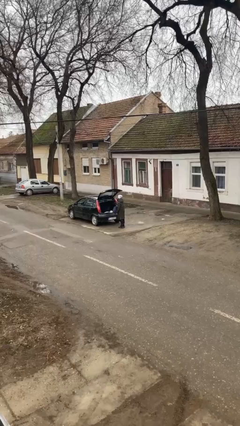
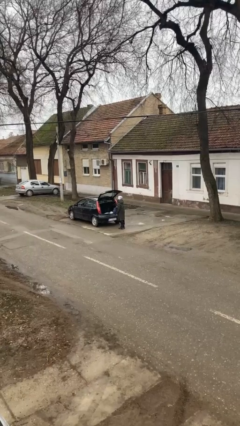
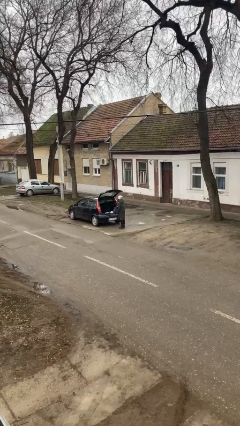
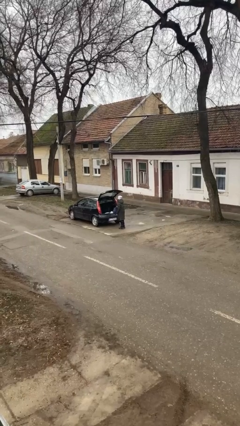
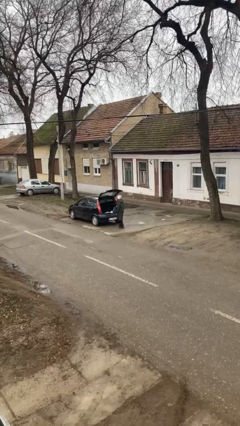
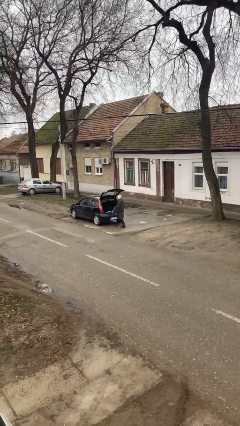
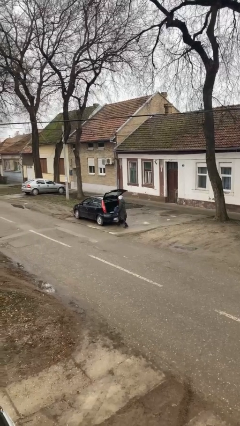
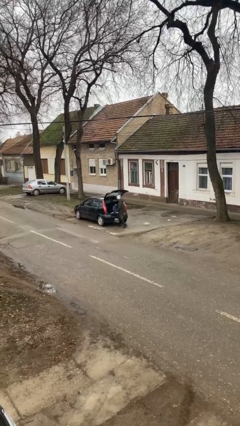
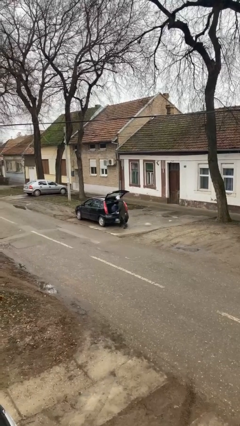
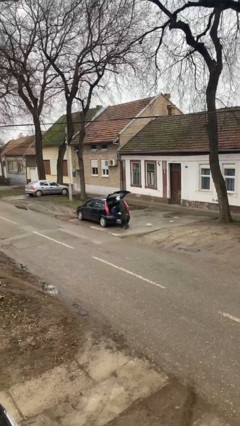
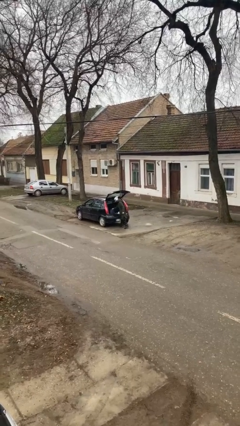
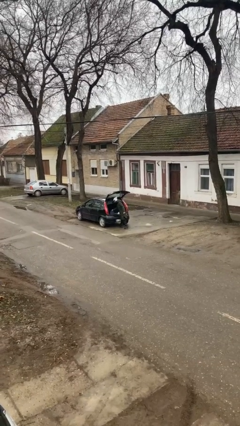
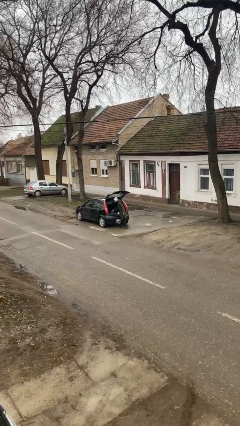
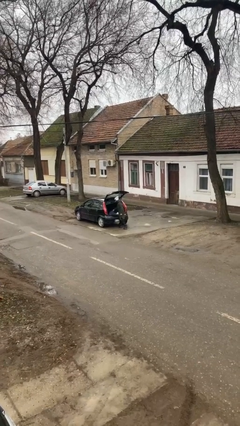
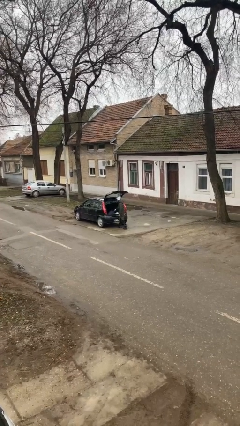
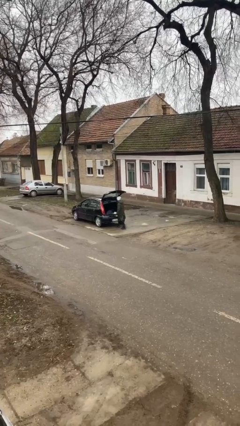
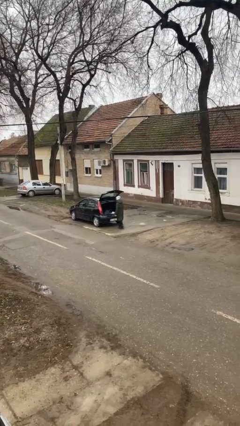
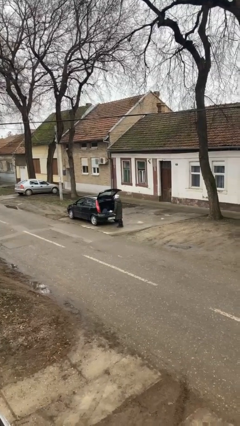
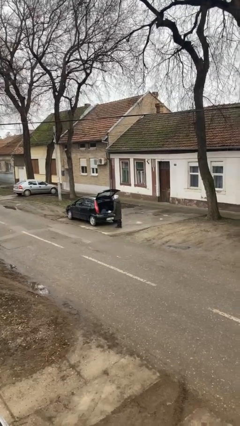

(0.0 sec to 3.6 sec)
person loads car

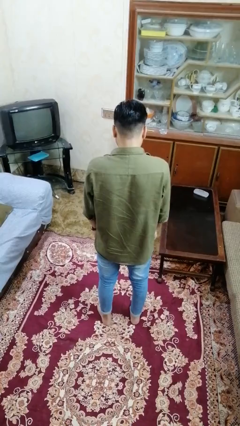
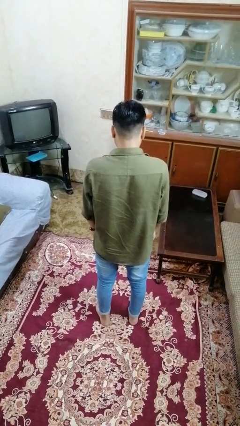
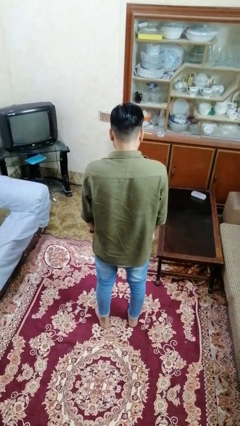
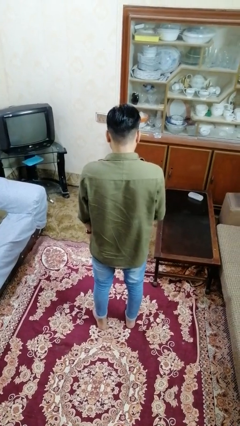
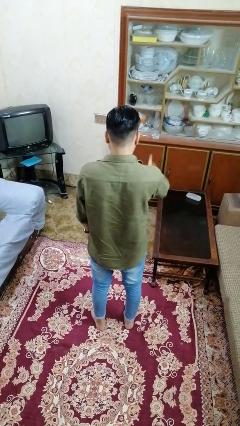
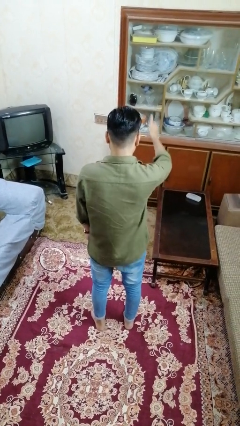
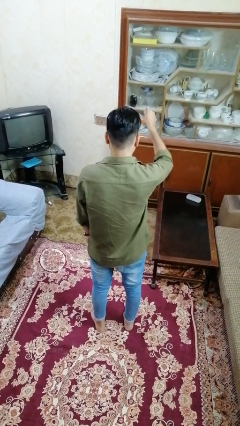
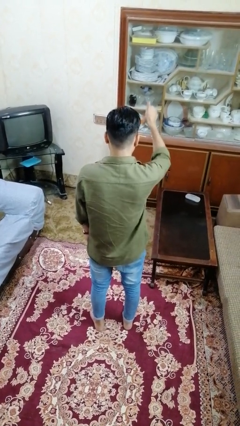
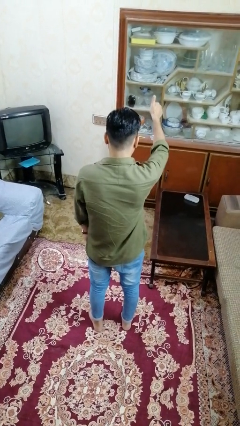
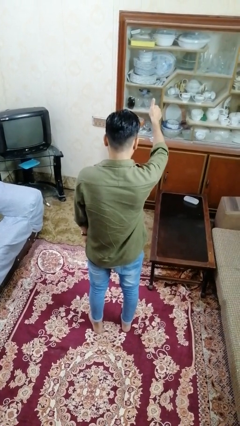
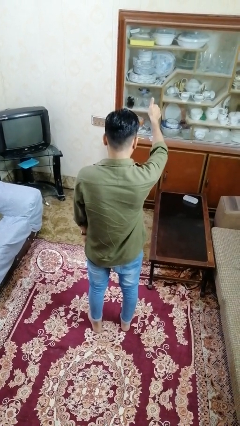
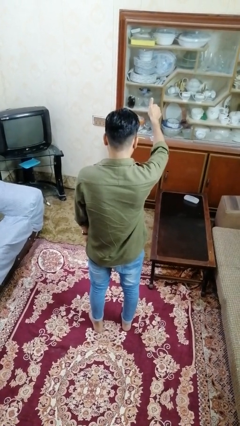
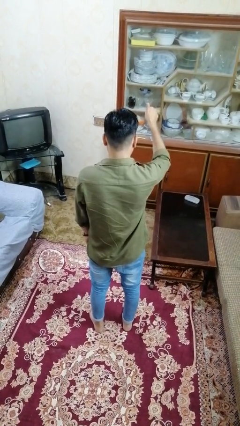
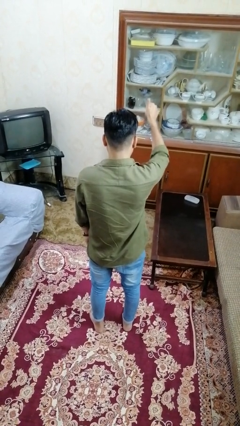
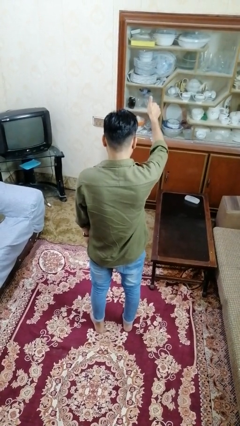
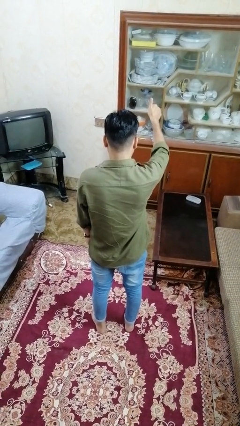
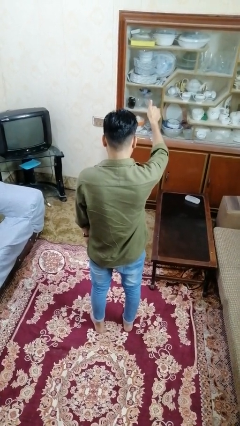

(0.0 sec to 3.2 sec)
person gestures thumbs up

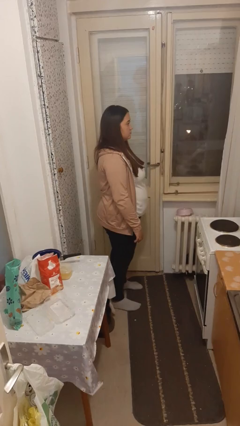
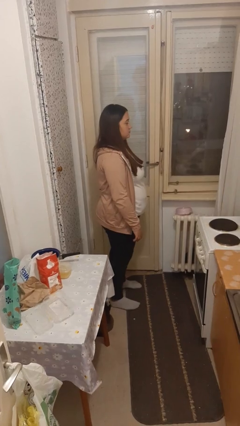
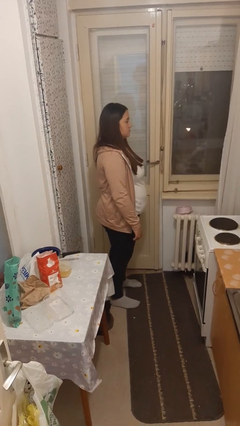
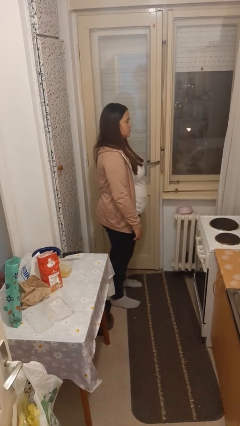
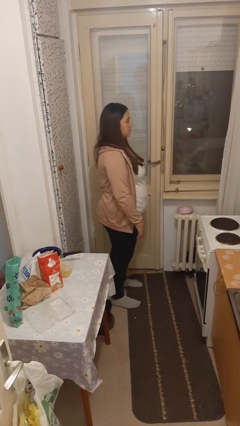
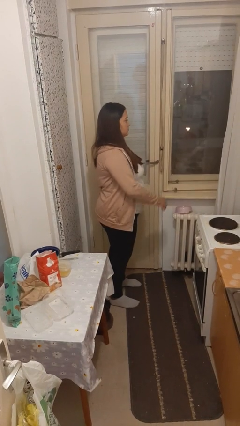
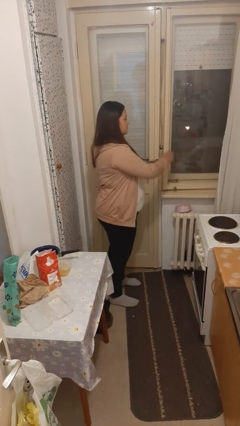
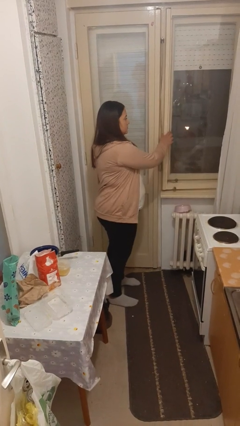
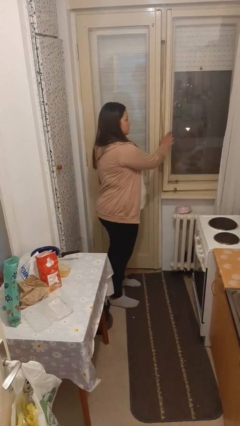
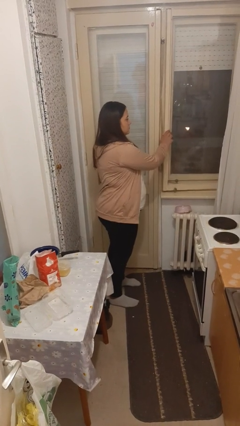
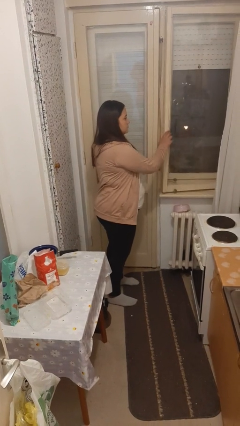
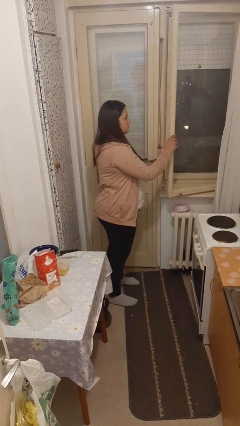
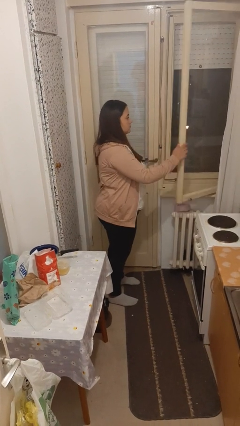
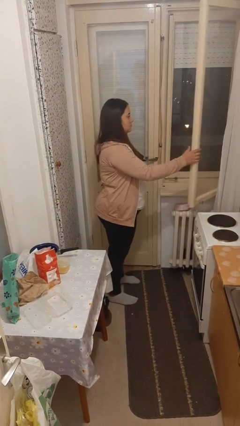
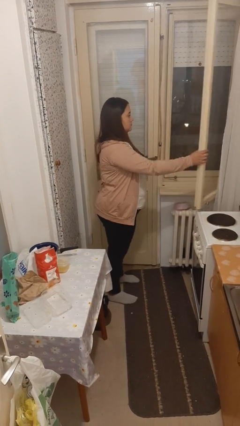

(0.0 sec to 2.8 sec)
person opens home window

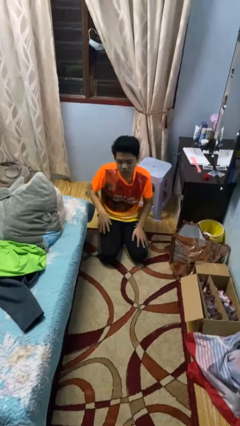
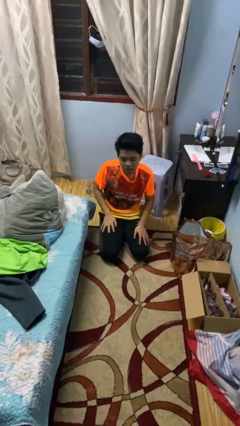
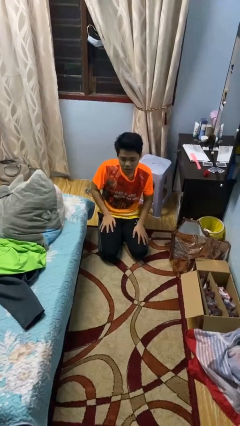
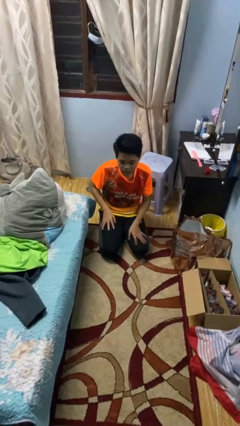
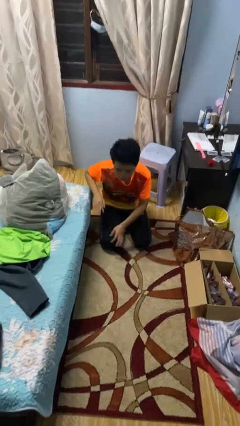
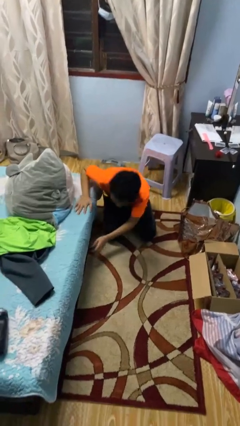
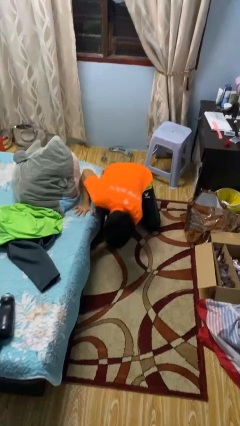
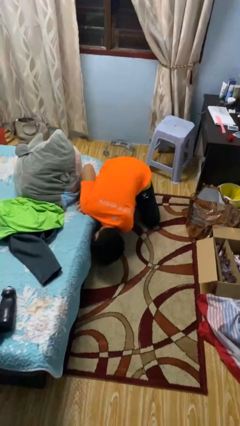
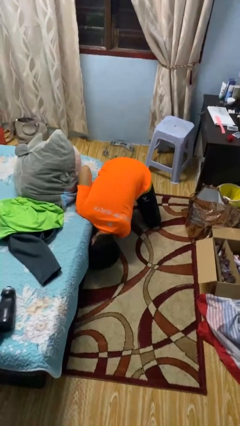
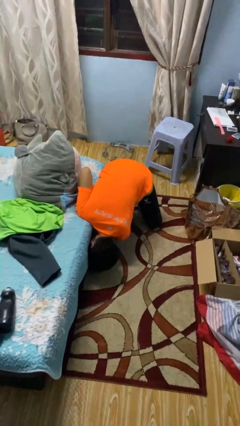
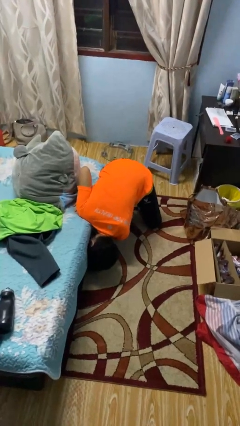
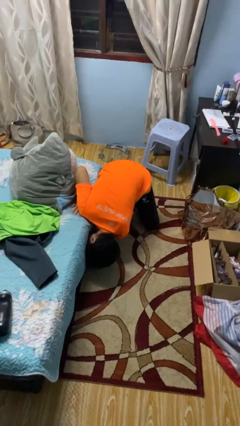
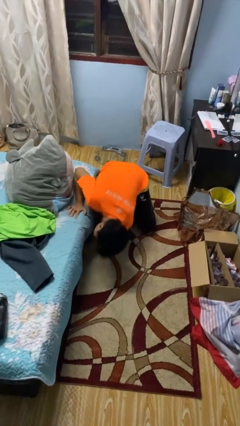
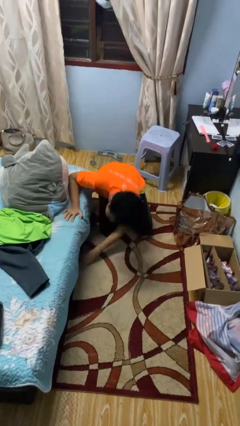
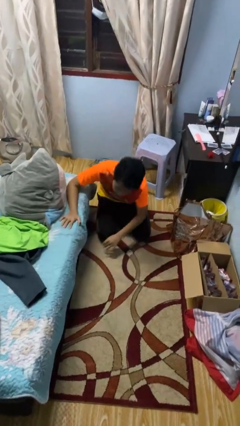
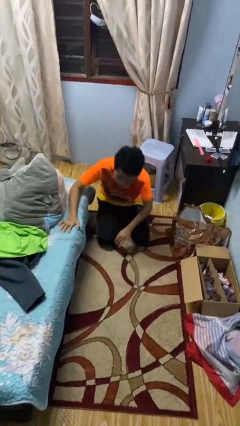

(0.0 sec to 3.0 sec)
person searches under bed

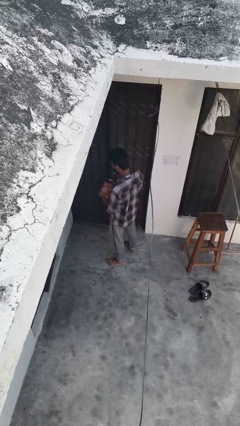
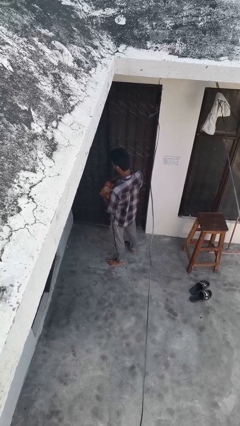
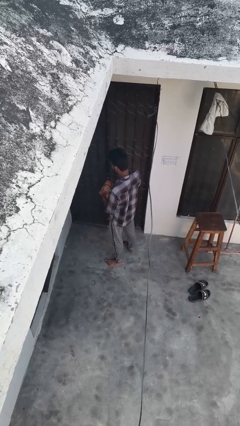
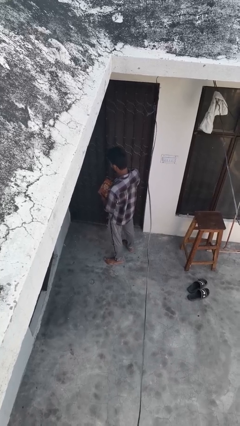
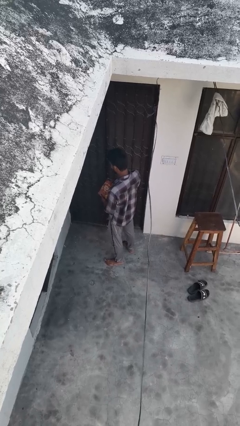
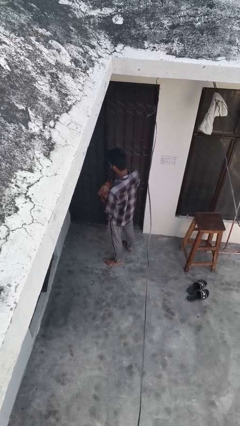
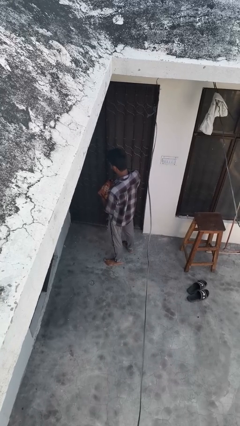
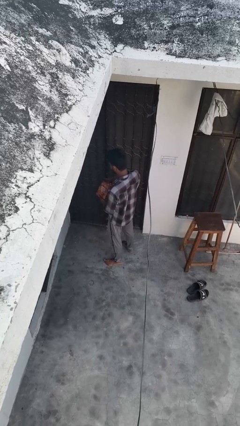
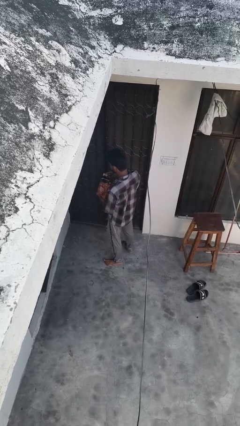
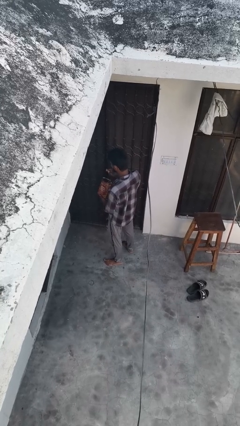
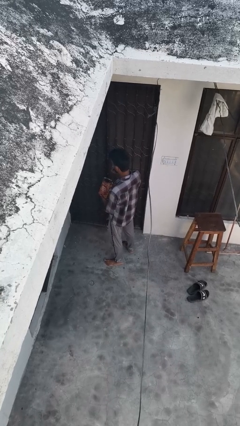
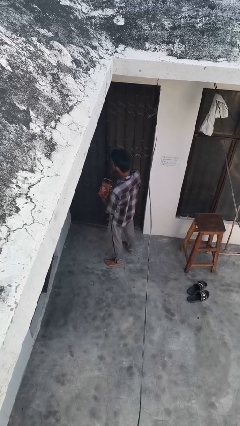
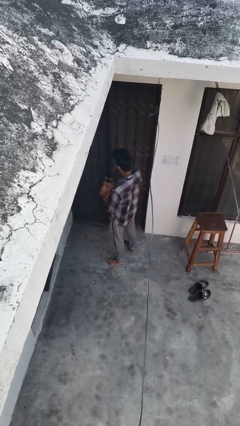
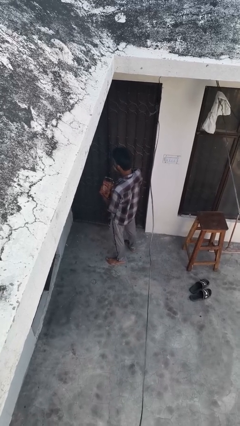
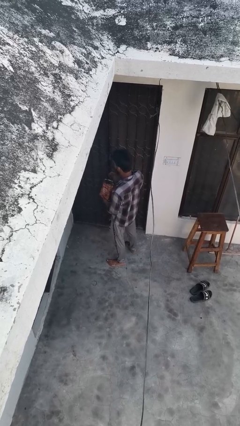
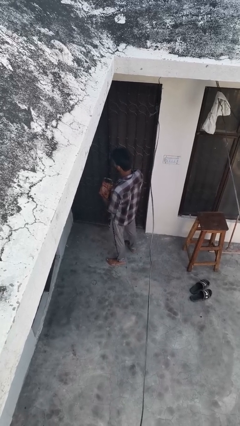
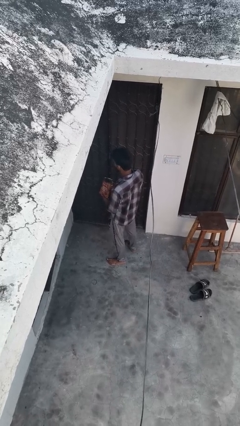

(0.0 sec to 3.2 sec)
person eats snack from bag

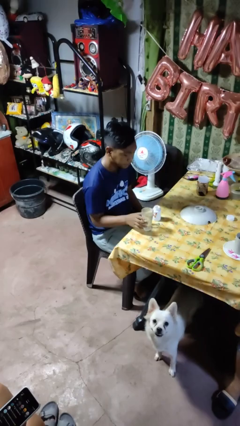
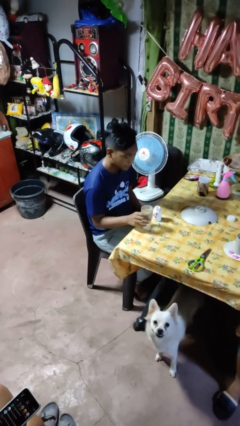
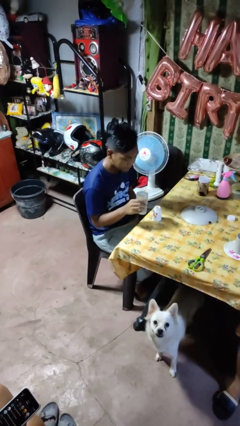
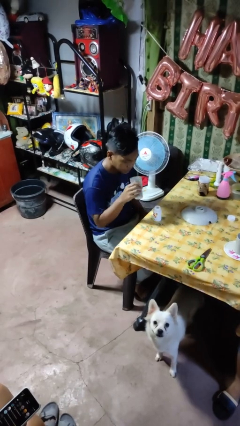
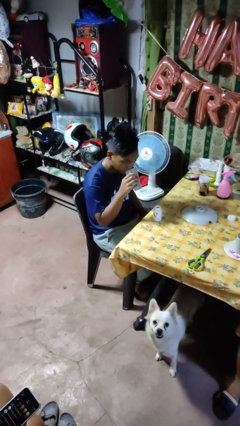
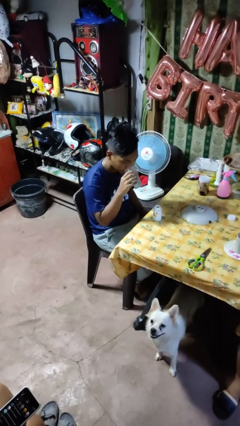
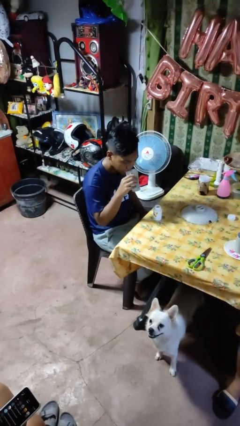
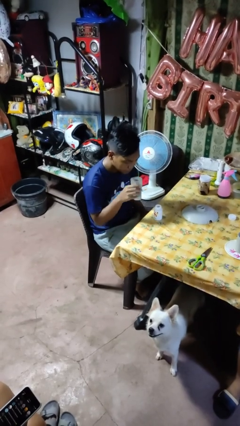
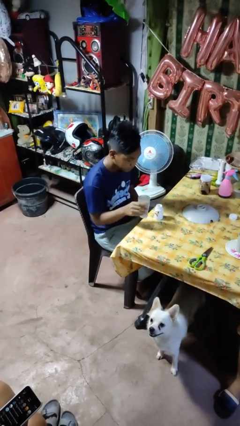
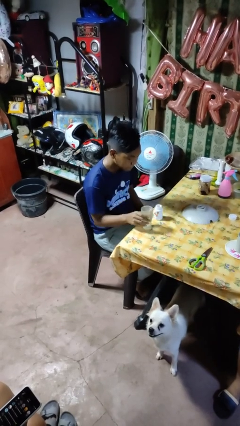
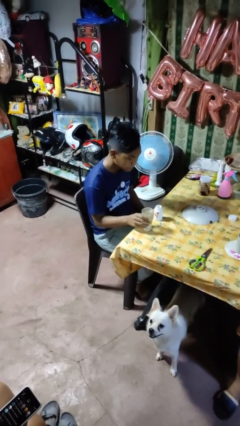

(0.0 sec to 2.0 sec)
person drinks from cup
